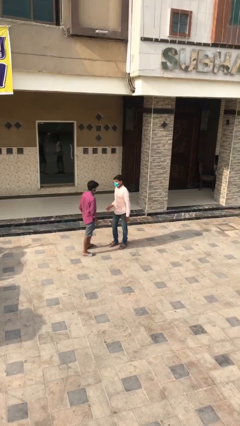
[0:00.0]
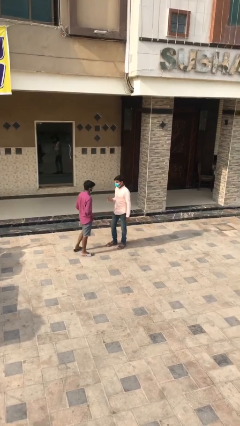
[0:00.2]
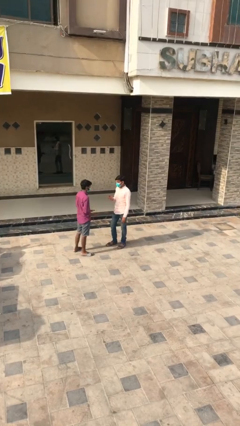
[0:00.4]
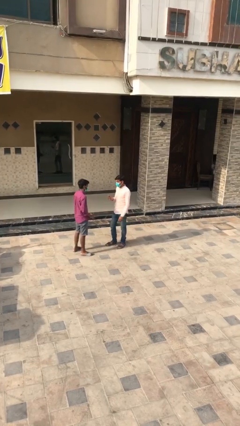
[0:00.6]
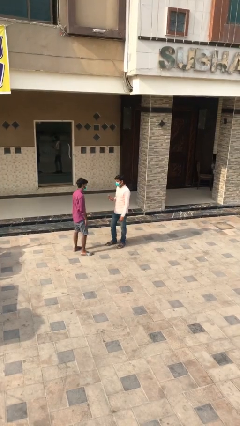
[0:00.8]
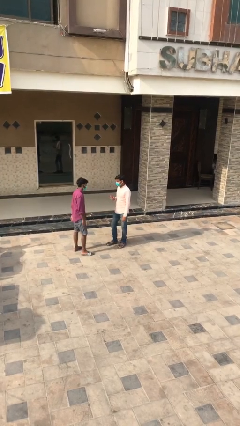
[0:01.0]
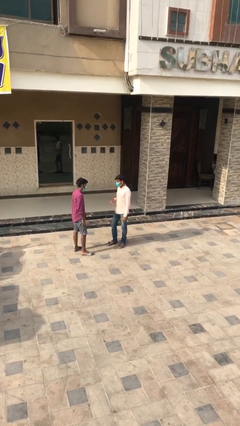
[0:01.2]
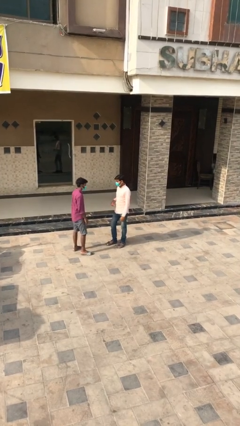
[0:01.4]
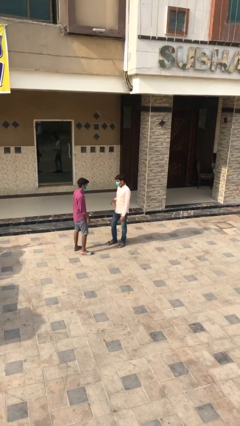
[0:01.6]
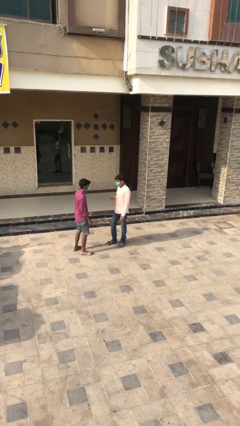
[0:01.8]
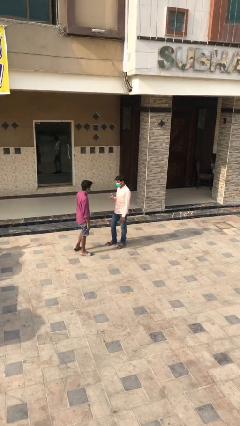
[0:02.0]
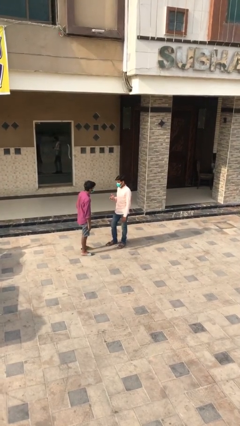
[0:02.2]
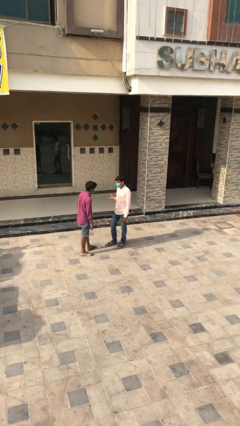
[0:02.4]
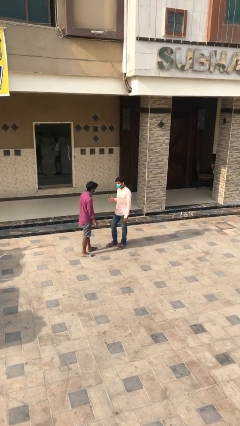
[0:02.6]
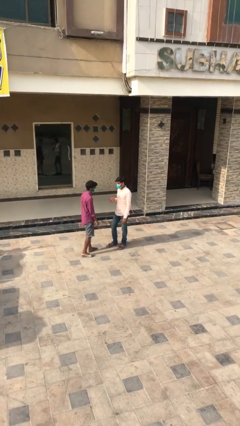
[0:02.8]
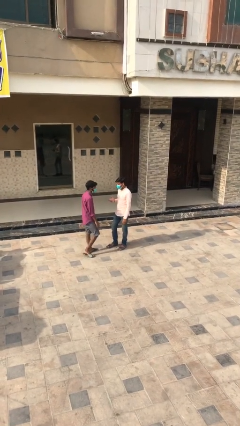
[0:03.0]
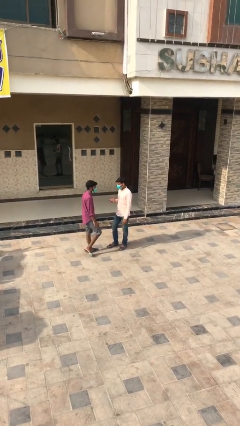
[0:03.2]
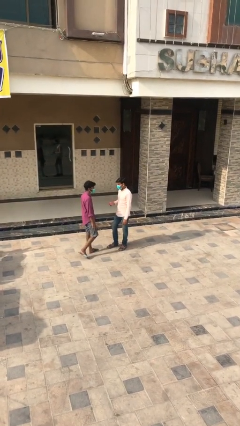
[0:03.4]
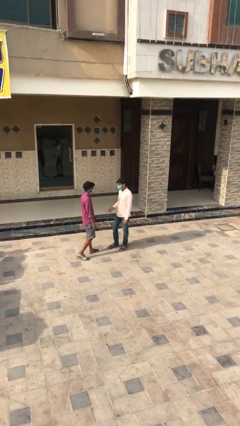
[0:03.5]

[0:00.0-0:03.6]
person talks to person

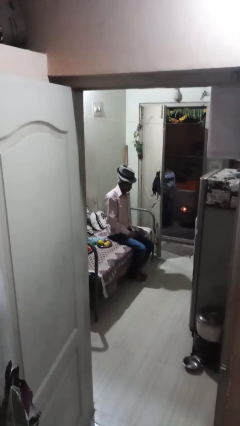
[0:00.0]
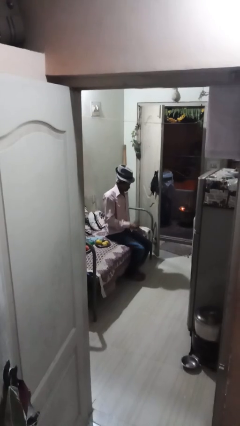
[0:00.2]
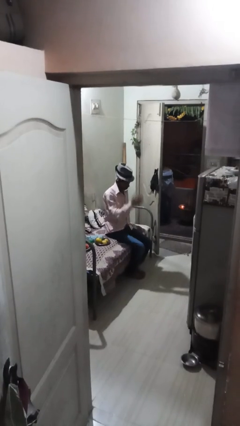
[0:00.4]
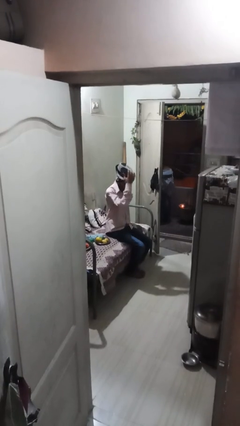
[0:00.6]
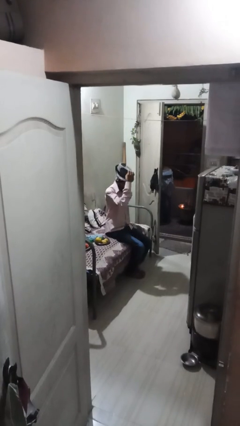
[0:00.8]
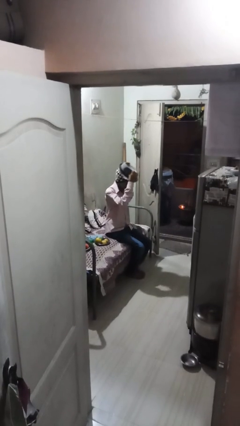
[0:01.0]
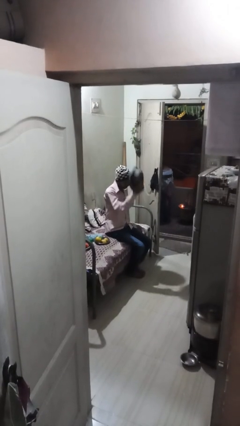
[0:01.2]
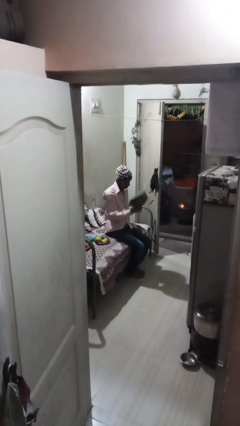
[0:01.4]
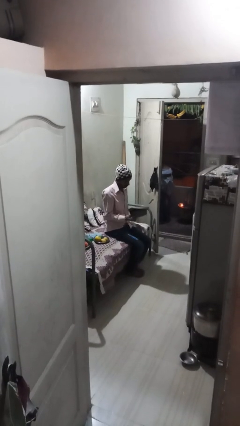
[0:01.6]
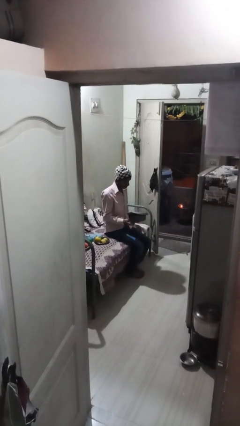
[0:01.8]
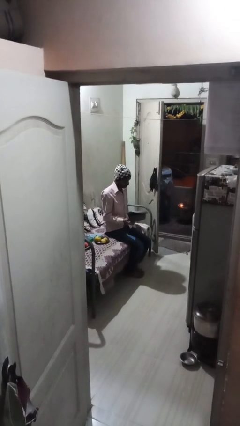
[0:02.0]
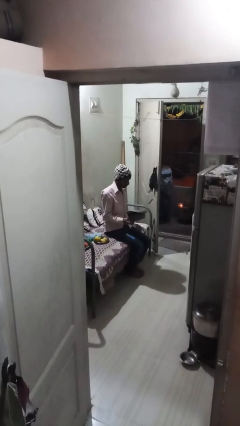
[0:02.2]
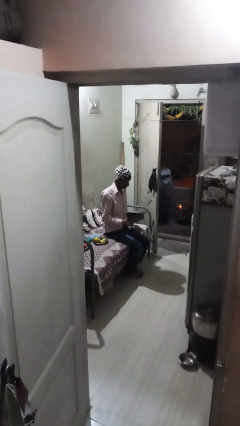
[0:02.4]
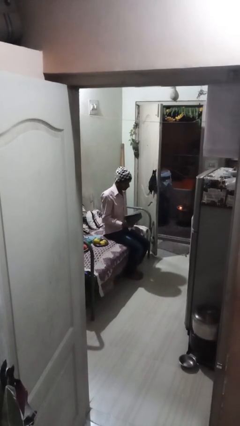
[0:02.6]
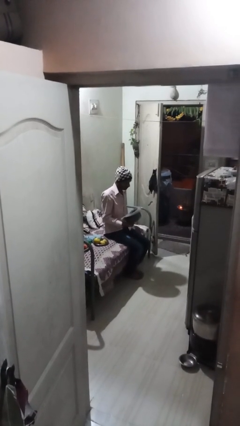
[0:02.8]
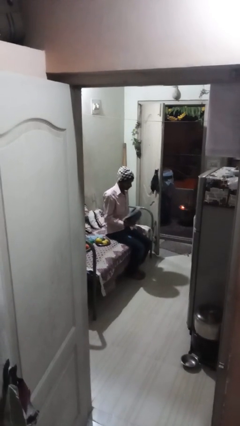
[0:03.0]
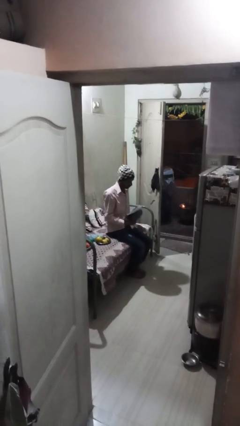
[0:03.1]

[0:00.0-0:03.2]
person takes off hat

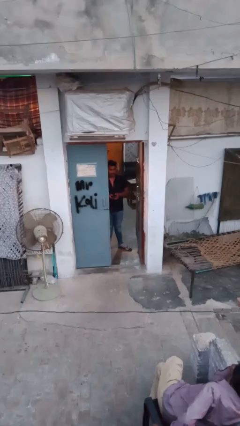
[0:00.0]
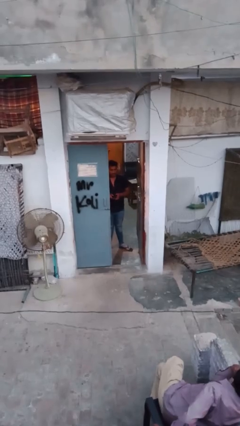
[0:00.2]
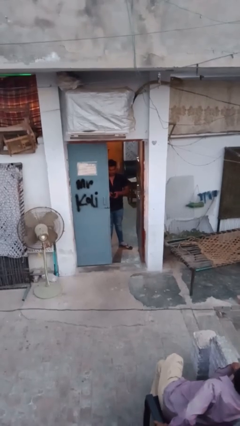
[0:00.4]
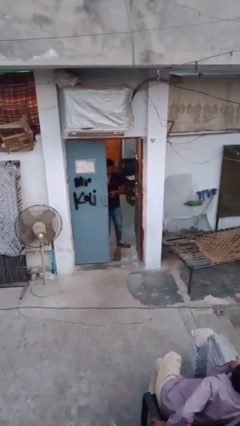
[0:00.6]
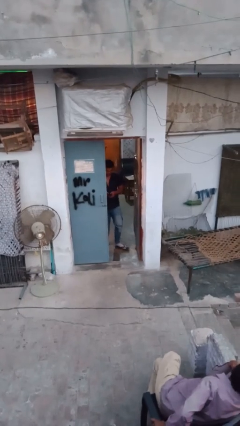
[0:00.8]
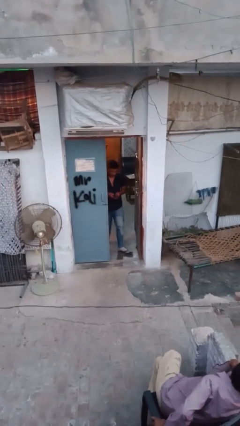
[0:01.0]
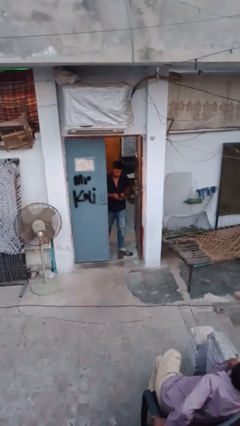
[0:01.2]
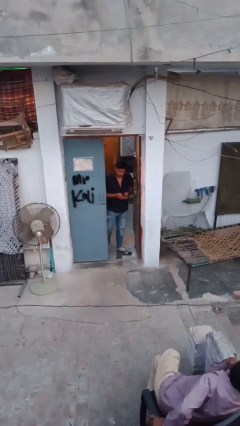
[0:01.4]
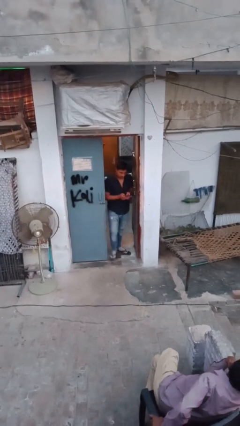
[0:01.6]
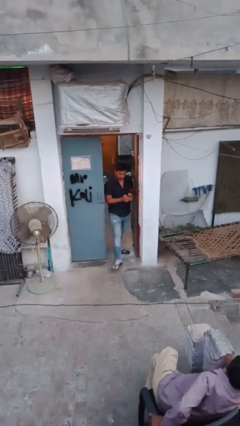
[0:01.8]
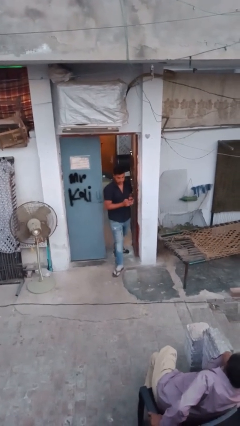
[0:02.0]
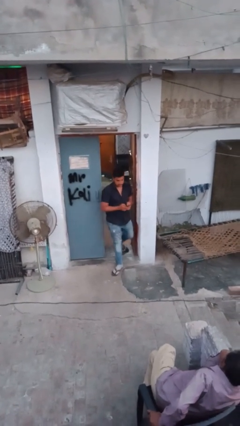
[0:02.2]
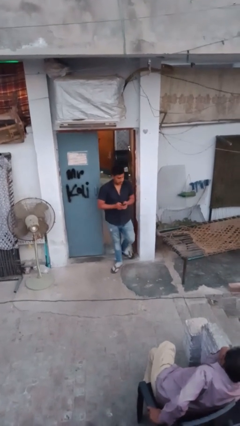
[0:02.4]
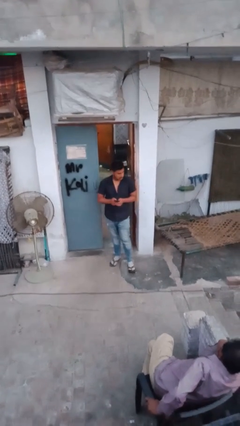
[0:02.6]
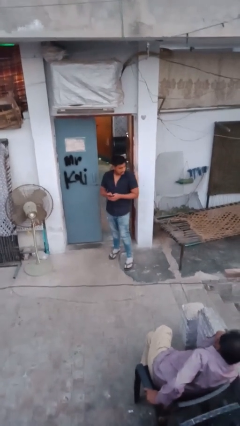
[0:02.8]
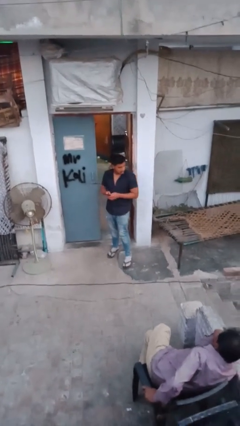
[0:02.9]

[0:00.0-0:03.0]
person enters scene through structure

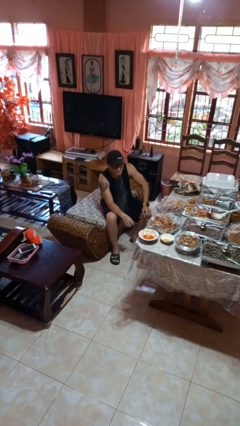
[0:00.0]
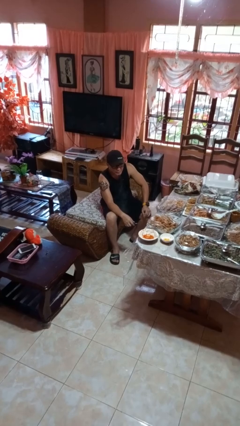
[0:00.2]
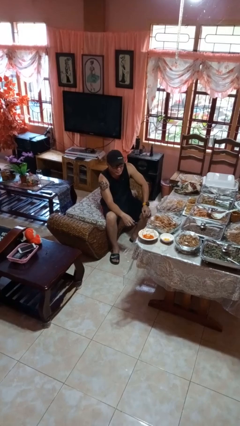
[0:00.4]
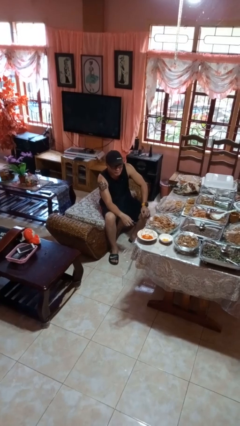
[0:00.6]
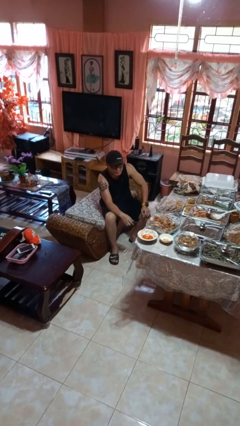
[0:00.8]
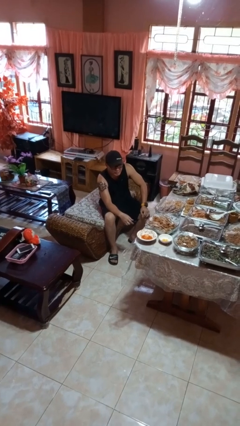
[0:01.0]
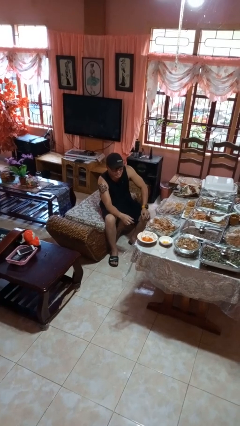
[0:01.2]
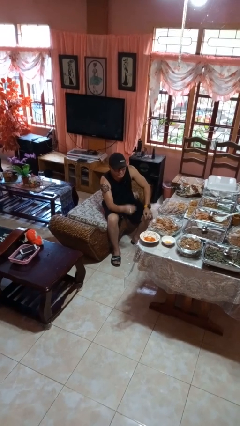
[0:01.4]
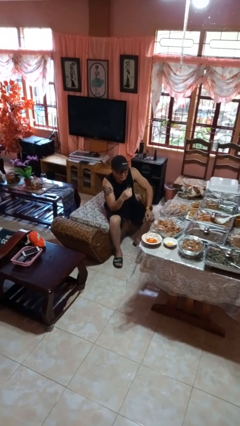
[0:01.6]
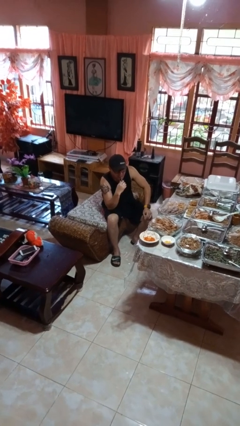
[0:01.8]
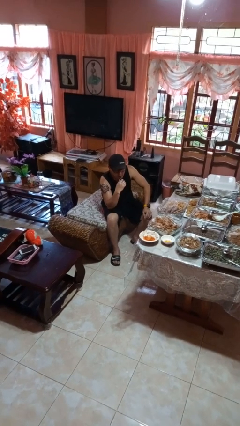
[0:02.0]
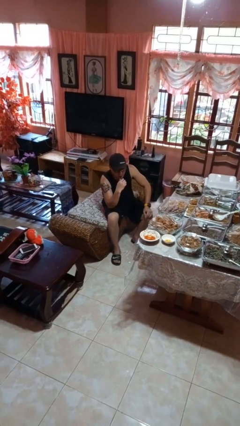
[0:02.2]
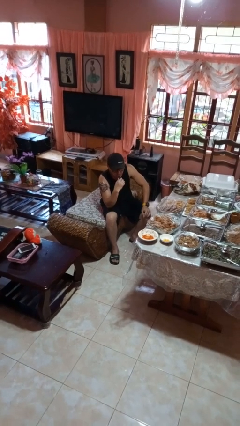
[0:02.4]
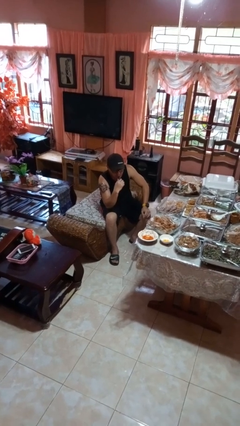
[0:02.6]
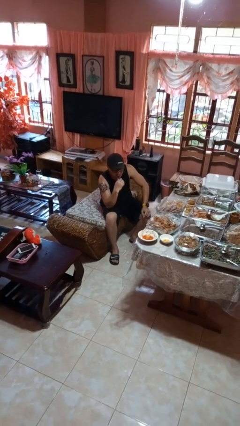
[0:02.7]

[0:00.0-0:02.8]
person vapes

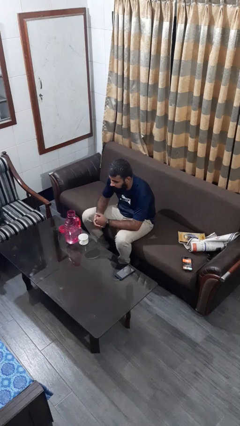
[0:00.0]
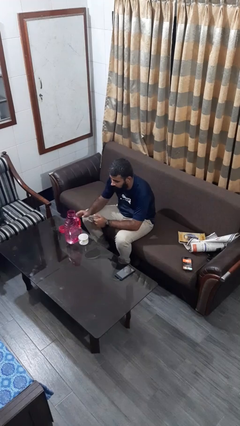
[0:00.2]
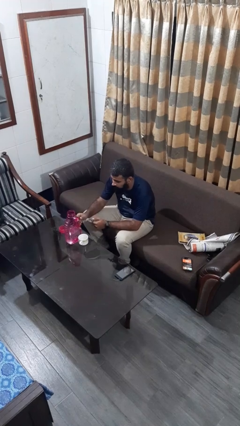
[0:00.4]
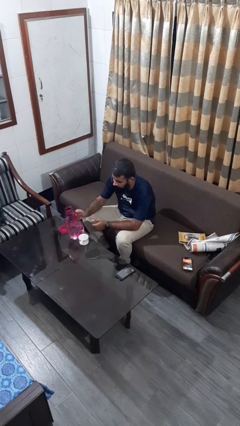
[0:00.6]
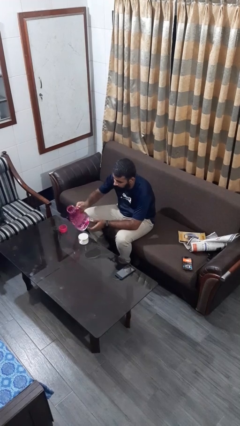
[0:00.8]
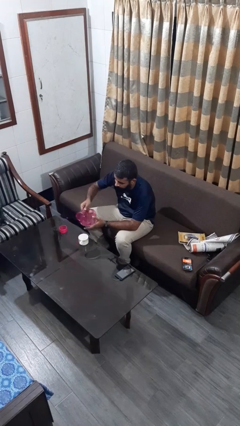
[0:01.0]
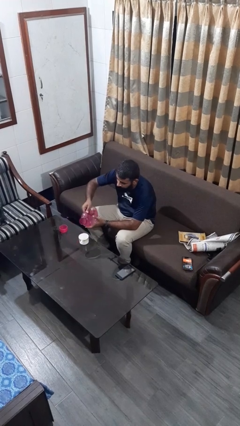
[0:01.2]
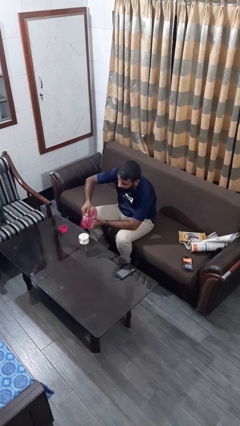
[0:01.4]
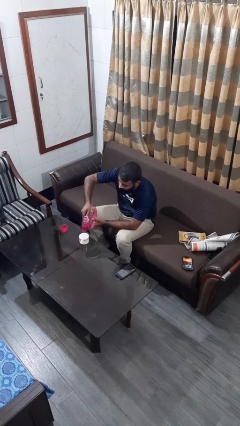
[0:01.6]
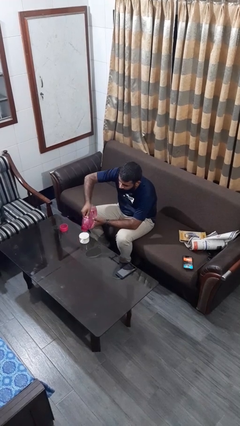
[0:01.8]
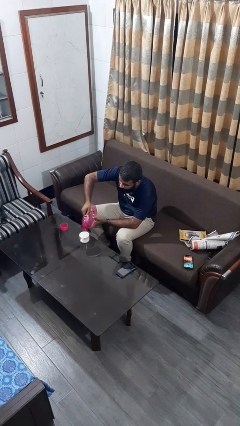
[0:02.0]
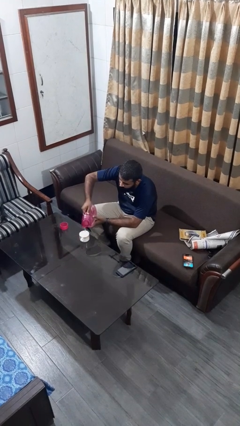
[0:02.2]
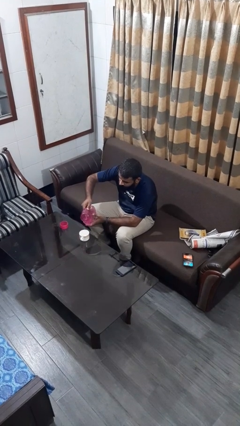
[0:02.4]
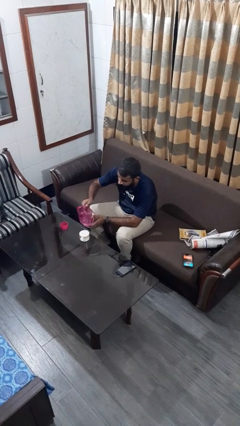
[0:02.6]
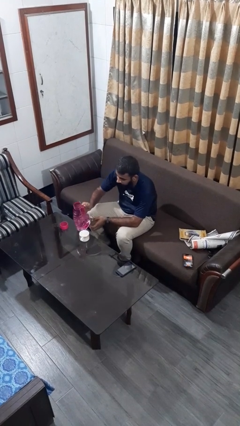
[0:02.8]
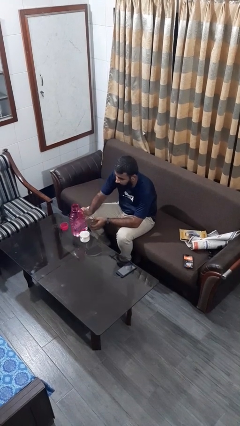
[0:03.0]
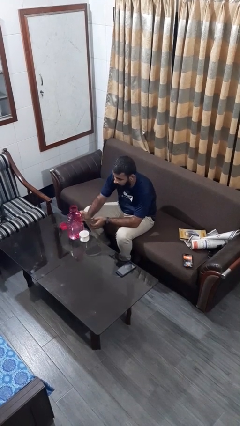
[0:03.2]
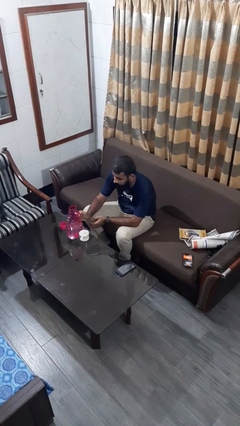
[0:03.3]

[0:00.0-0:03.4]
person pours liquid into cup

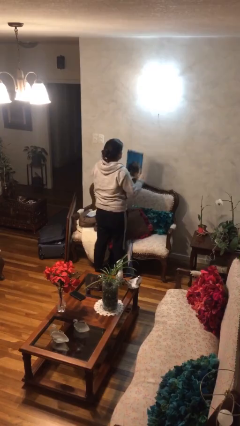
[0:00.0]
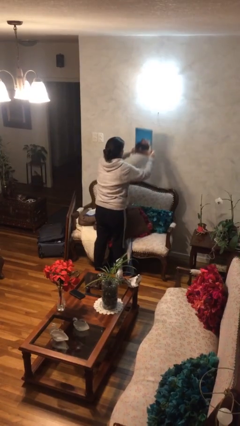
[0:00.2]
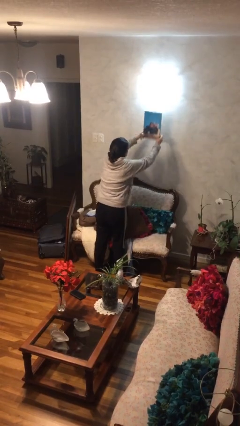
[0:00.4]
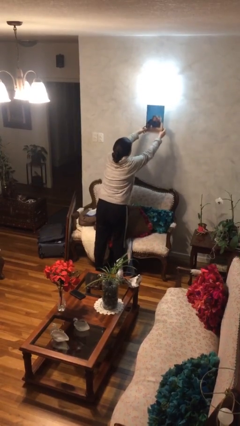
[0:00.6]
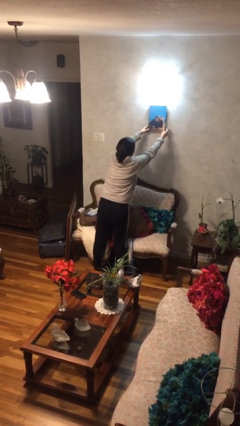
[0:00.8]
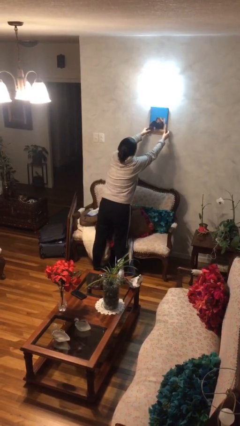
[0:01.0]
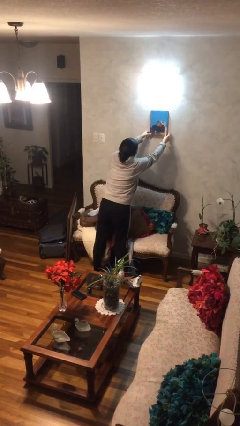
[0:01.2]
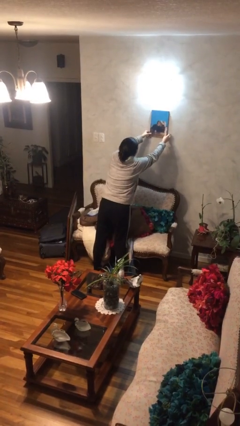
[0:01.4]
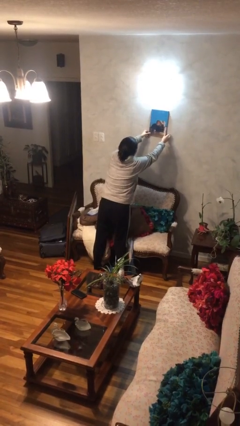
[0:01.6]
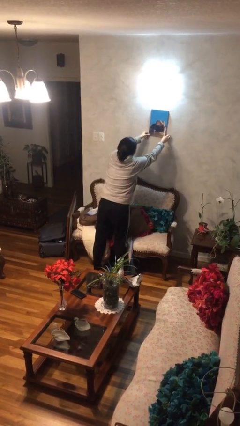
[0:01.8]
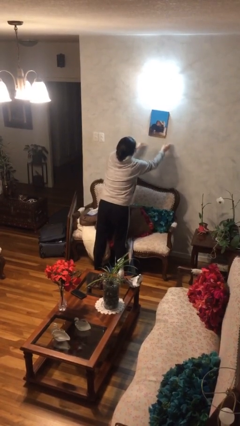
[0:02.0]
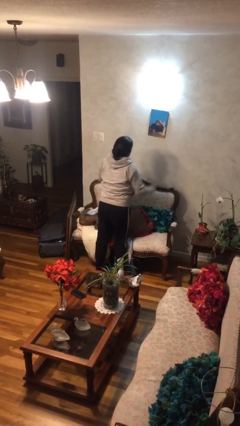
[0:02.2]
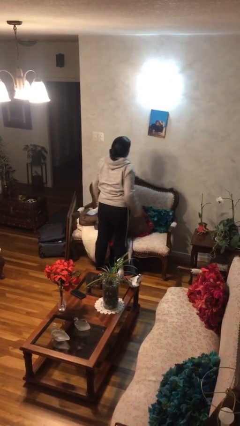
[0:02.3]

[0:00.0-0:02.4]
person puts up picture frame
